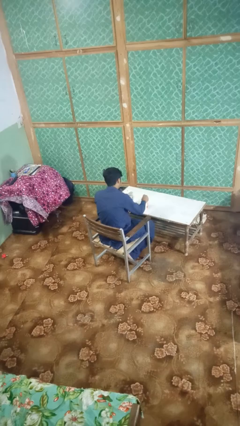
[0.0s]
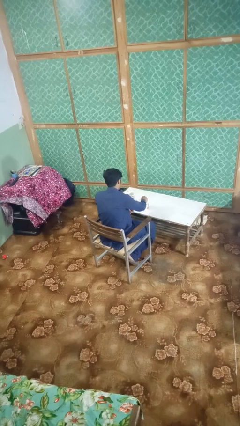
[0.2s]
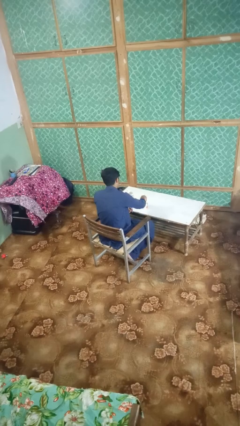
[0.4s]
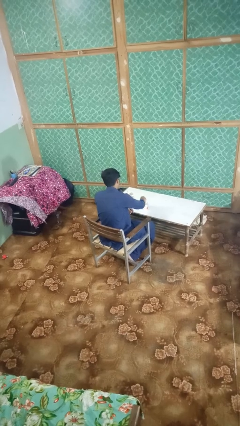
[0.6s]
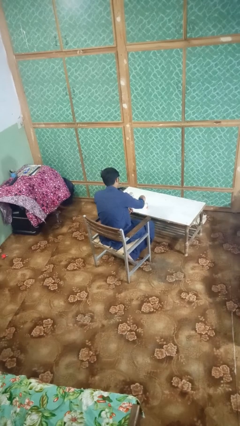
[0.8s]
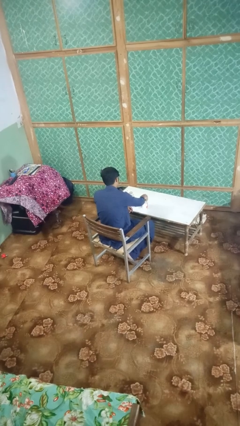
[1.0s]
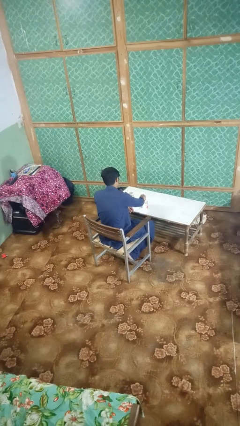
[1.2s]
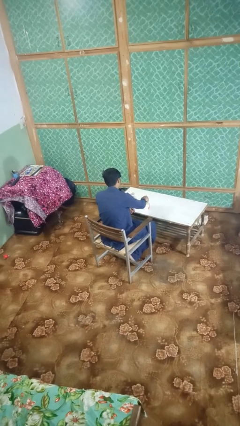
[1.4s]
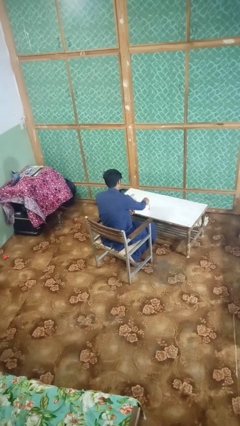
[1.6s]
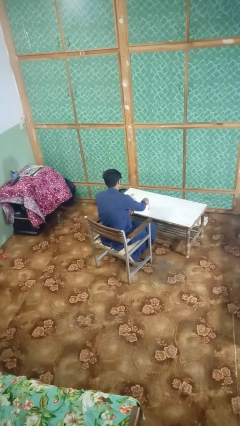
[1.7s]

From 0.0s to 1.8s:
person stirs mug

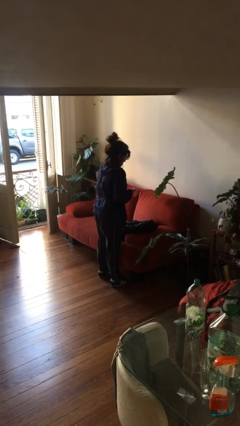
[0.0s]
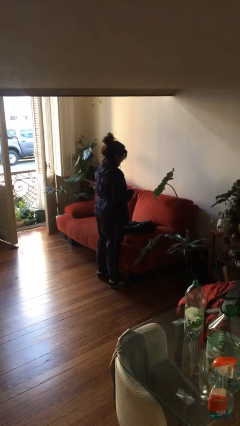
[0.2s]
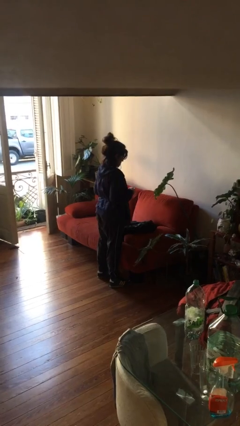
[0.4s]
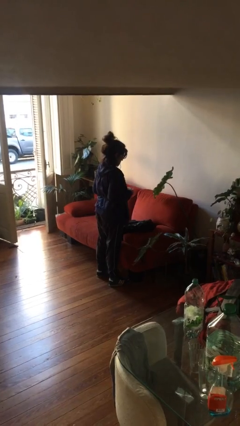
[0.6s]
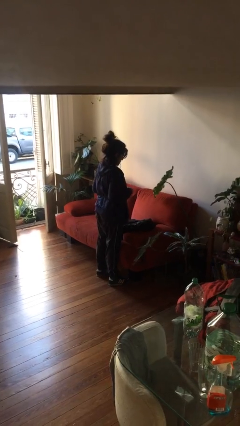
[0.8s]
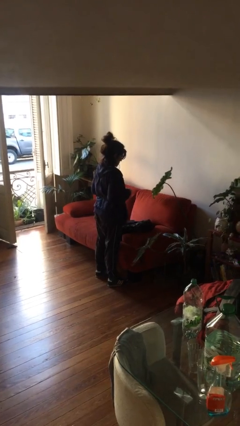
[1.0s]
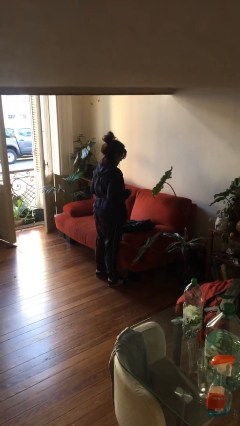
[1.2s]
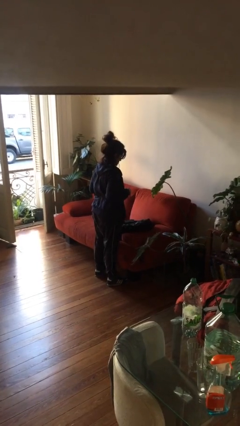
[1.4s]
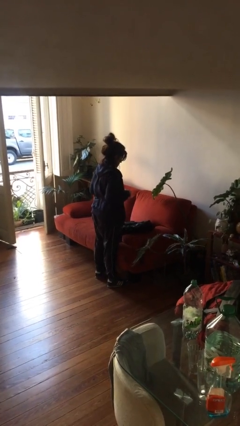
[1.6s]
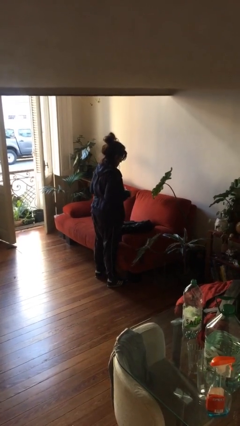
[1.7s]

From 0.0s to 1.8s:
person takes object from backpack

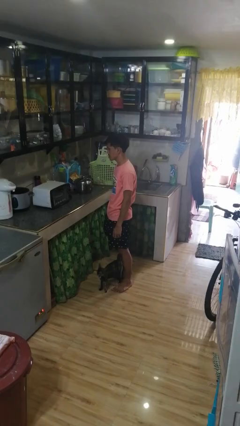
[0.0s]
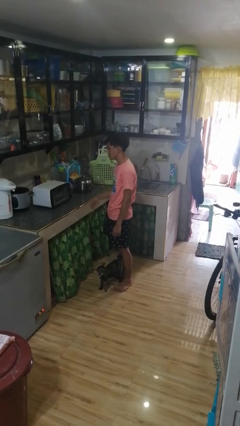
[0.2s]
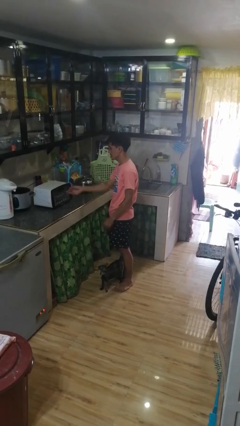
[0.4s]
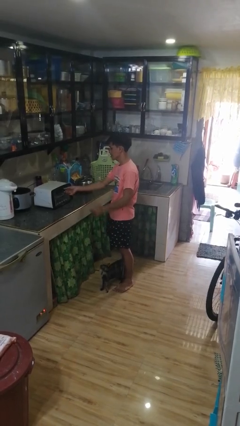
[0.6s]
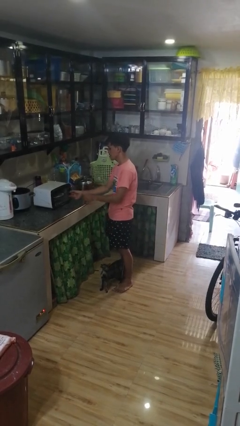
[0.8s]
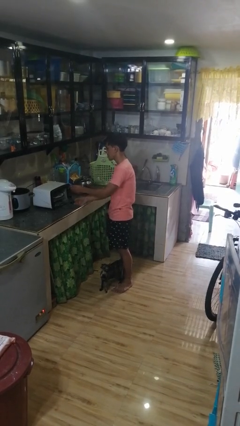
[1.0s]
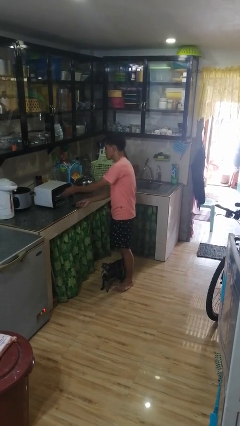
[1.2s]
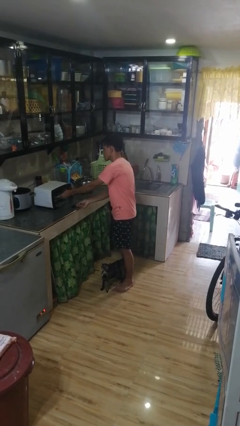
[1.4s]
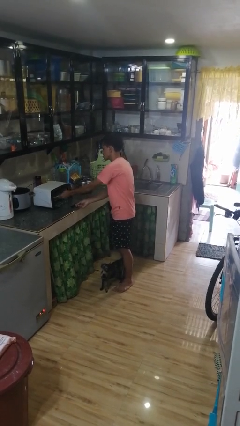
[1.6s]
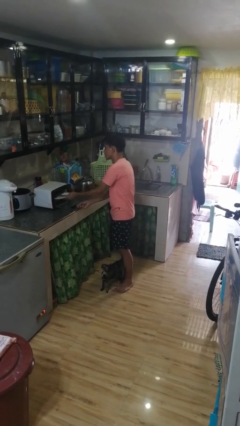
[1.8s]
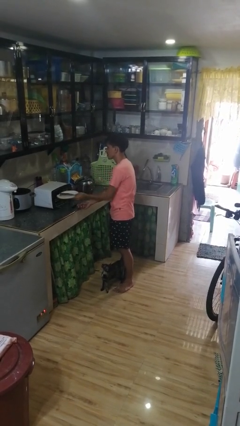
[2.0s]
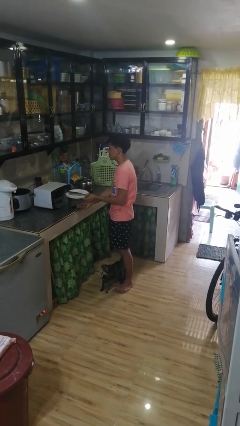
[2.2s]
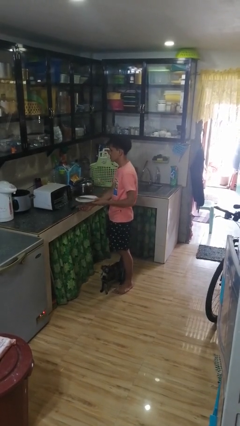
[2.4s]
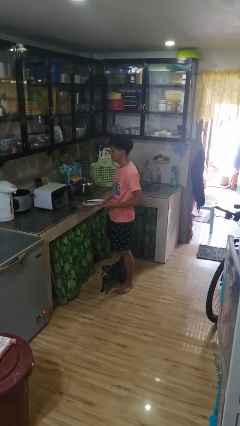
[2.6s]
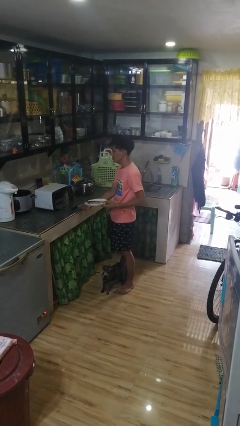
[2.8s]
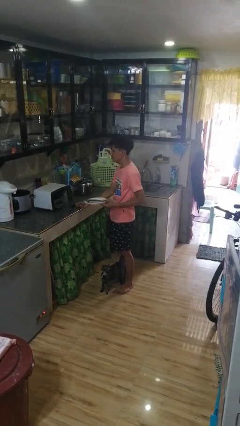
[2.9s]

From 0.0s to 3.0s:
person takes object from microwave

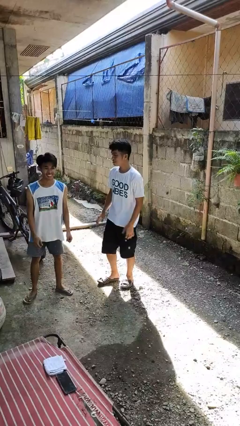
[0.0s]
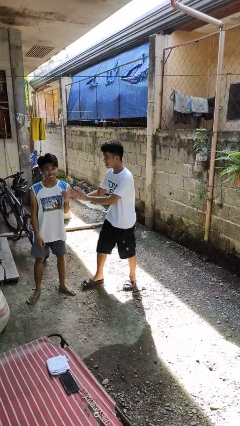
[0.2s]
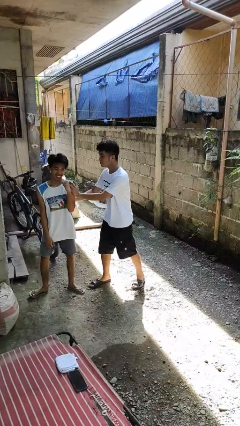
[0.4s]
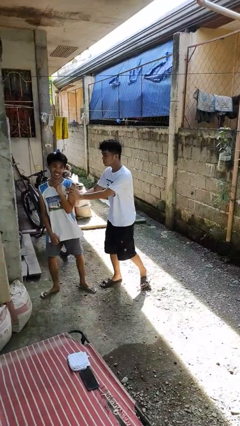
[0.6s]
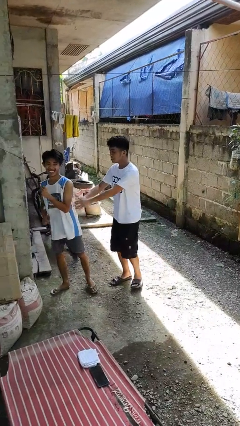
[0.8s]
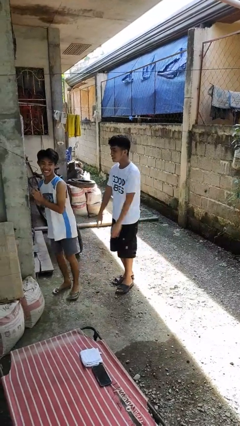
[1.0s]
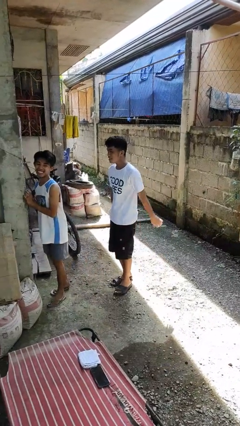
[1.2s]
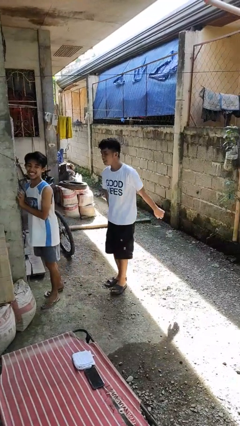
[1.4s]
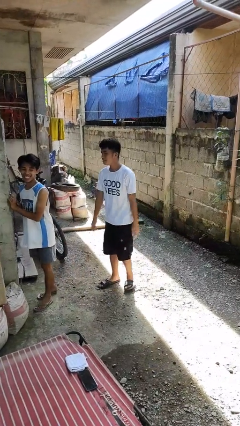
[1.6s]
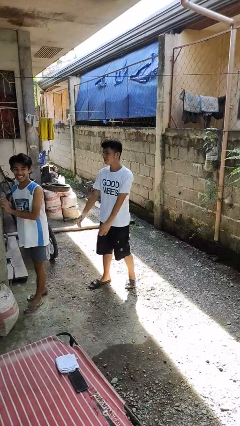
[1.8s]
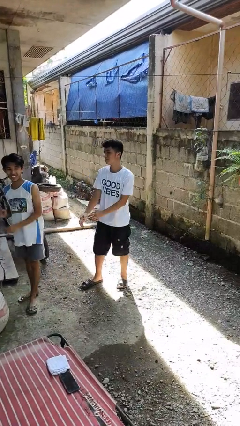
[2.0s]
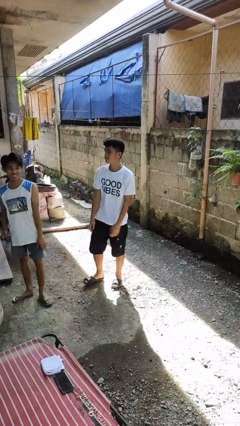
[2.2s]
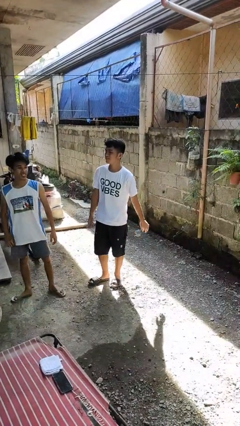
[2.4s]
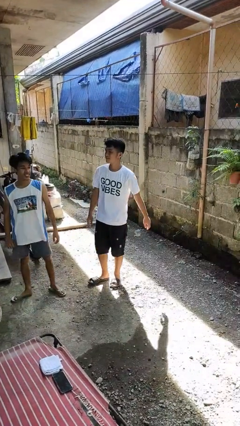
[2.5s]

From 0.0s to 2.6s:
person shoves person

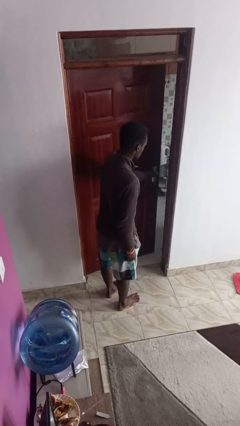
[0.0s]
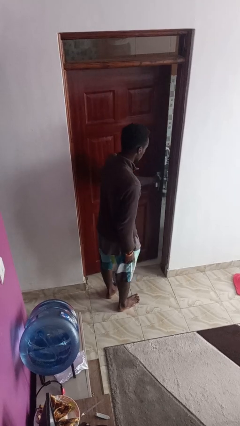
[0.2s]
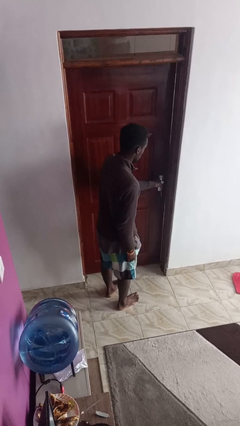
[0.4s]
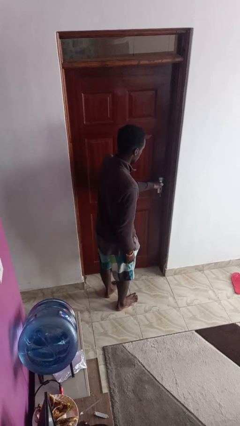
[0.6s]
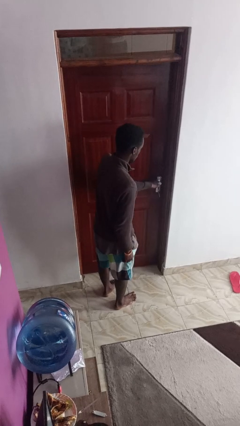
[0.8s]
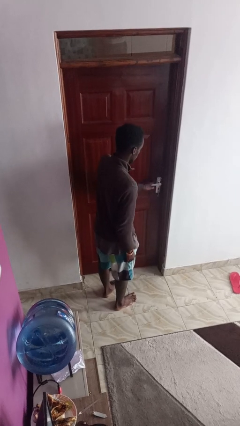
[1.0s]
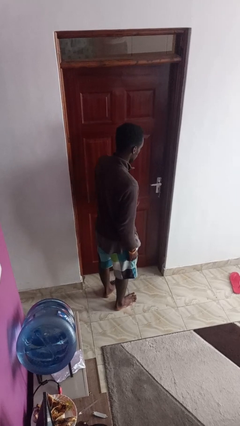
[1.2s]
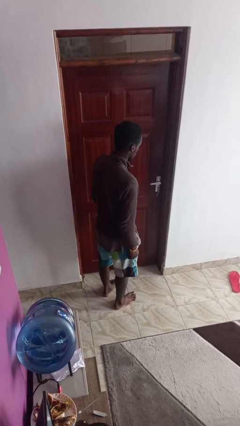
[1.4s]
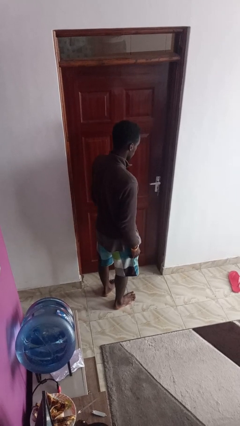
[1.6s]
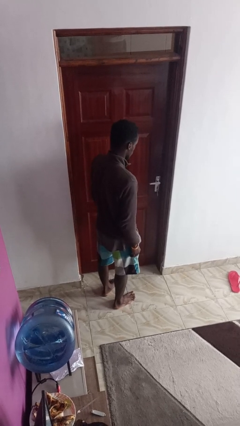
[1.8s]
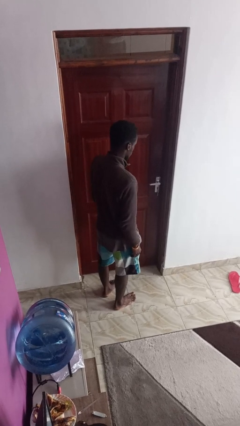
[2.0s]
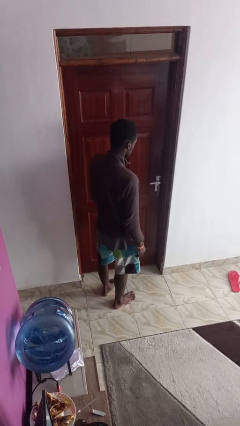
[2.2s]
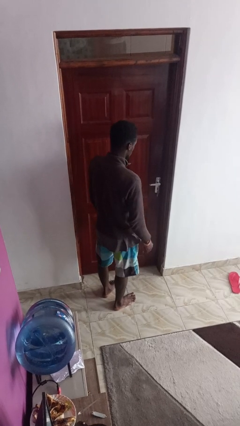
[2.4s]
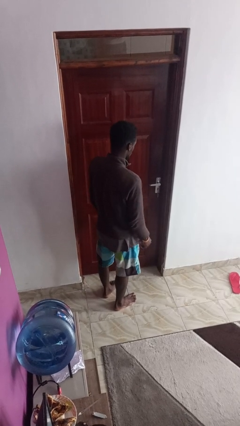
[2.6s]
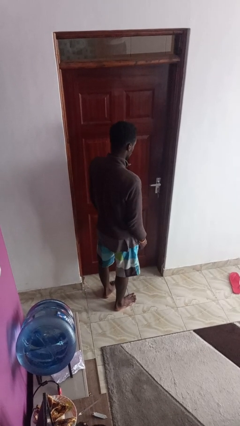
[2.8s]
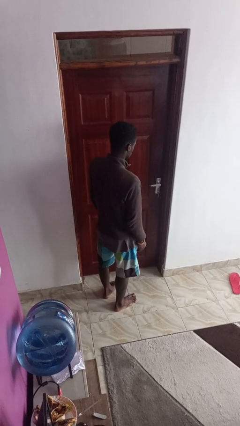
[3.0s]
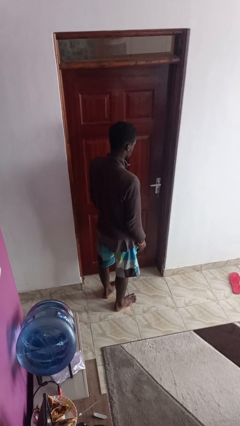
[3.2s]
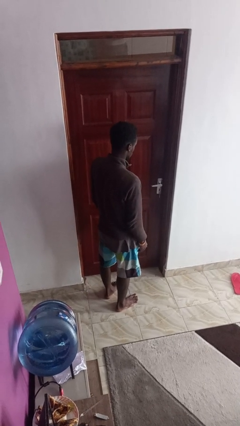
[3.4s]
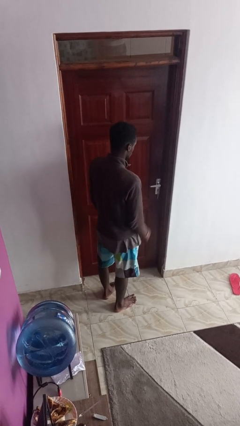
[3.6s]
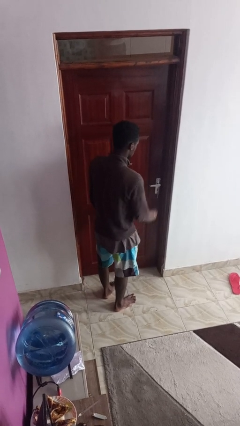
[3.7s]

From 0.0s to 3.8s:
person closes facility door

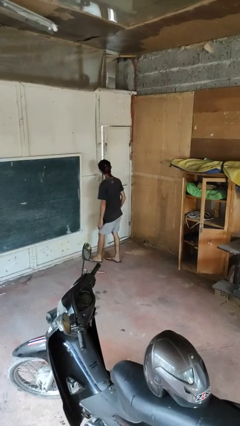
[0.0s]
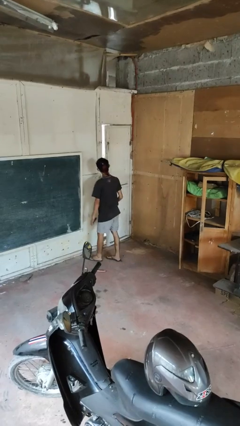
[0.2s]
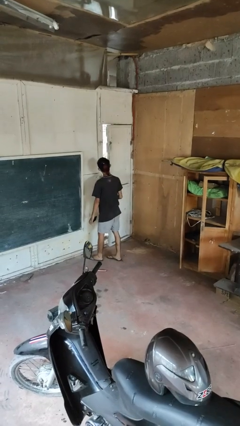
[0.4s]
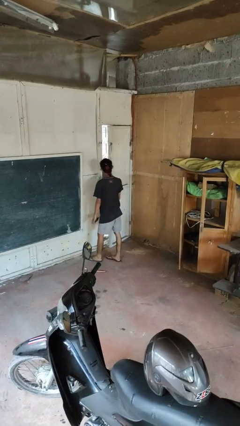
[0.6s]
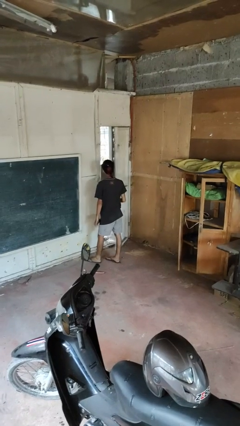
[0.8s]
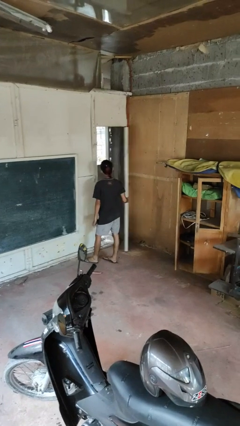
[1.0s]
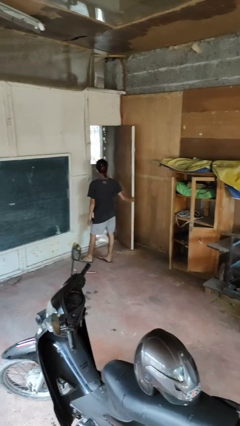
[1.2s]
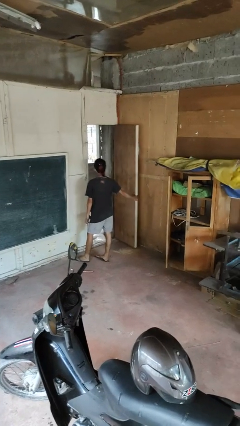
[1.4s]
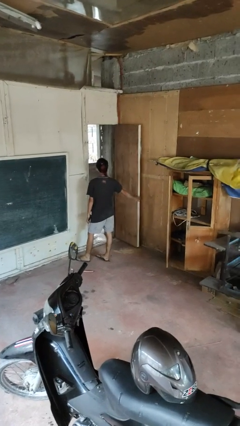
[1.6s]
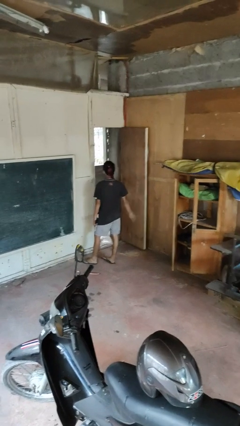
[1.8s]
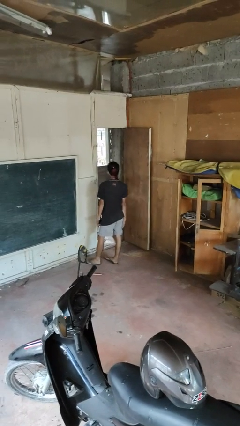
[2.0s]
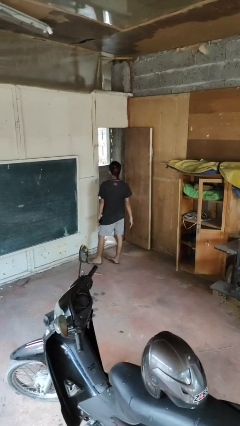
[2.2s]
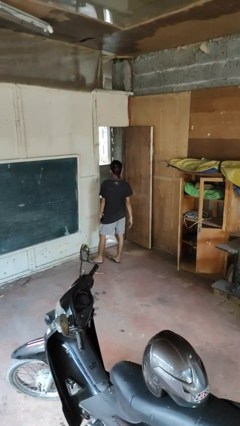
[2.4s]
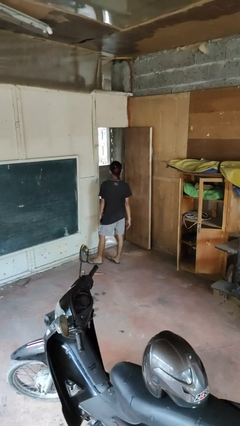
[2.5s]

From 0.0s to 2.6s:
person opens facility door

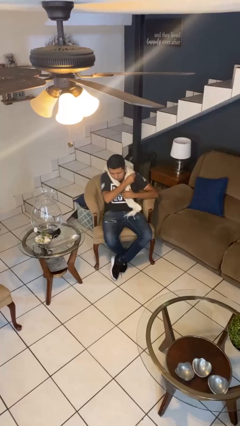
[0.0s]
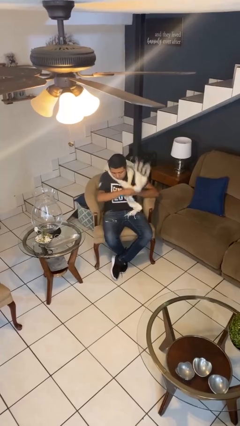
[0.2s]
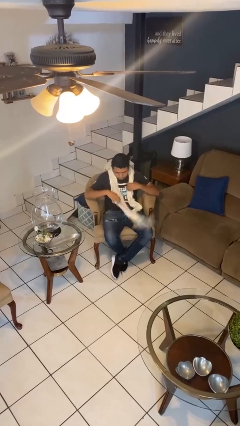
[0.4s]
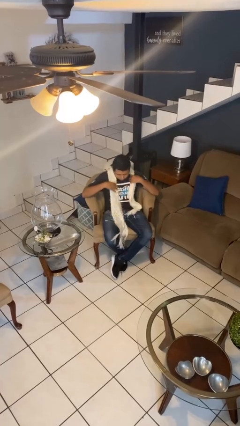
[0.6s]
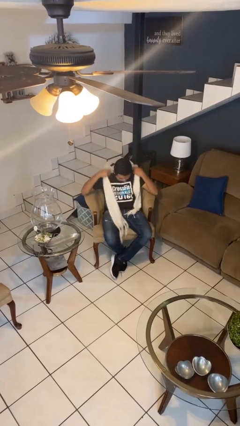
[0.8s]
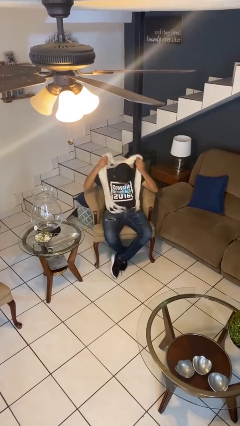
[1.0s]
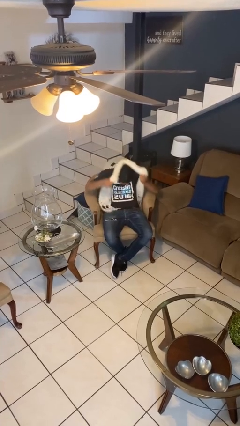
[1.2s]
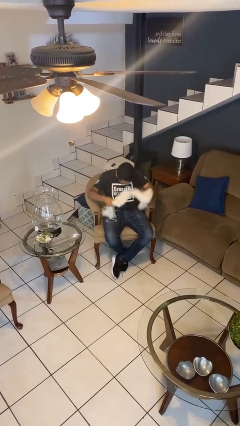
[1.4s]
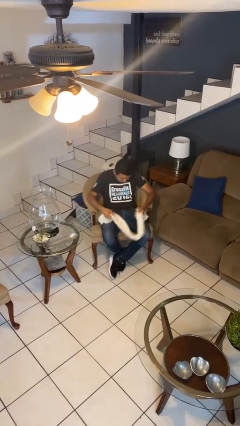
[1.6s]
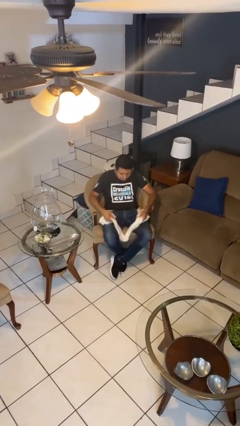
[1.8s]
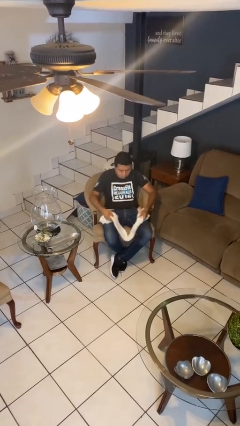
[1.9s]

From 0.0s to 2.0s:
person takes off scarf
